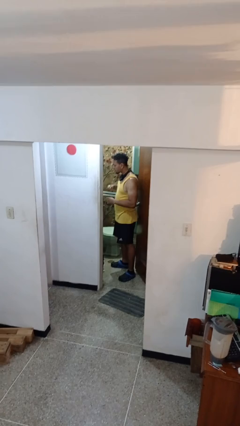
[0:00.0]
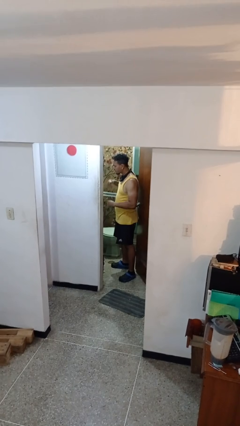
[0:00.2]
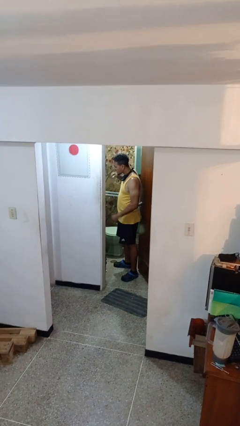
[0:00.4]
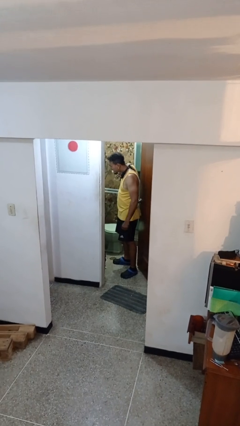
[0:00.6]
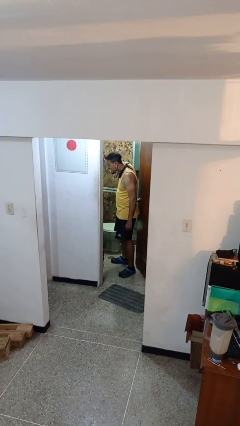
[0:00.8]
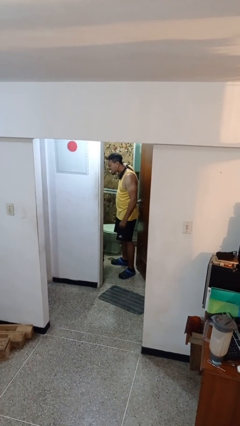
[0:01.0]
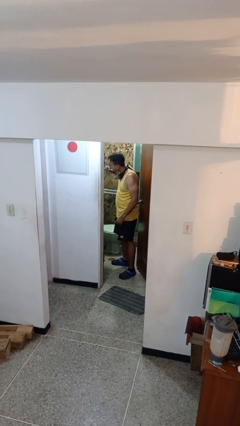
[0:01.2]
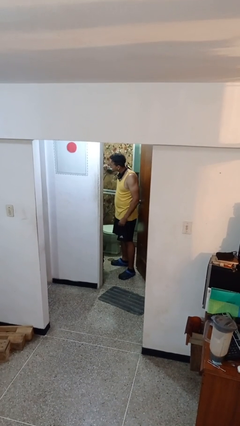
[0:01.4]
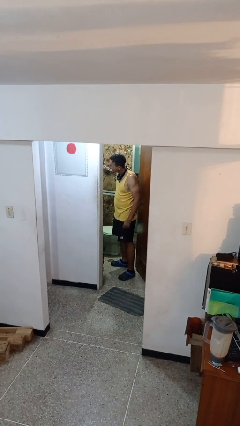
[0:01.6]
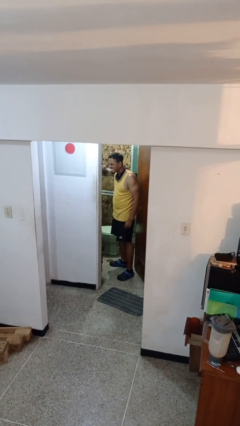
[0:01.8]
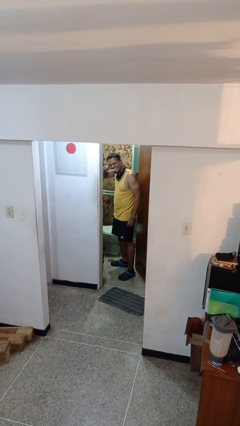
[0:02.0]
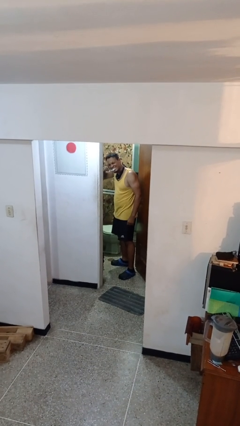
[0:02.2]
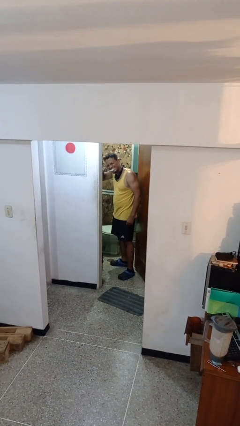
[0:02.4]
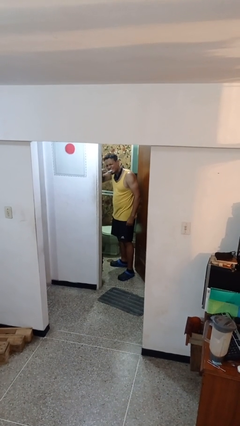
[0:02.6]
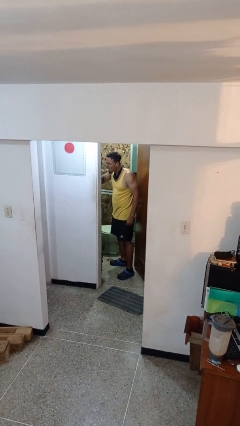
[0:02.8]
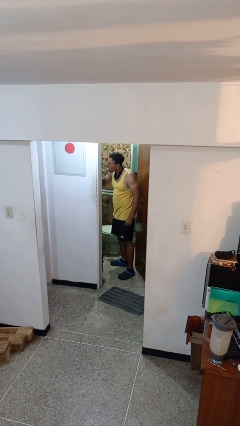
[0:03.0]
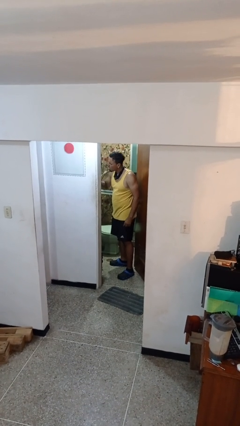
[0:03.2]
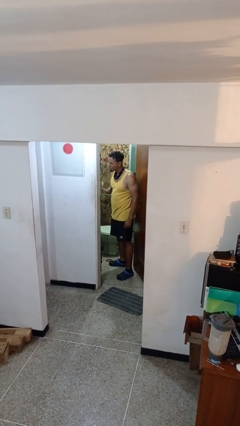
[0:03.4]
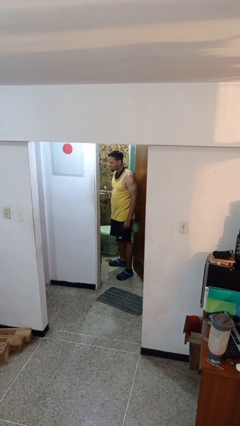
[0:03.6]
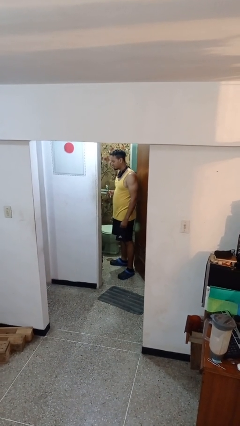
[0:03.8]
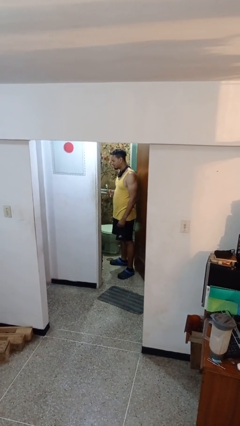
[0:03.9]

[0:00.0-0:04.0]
person brushes teeth

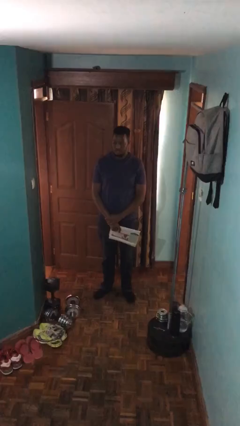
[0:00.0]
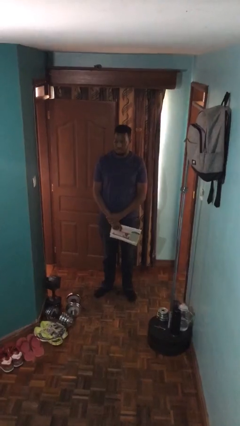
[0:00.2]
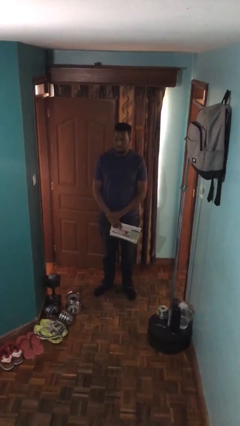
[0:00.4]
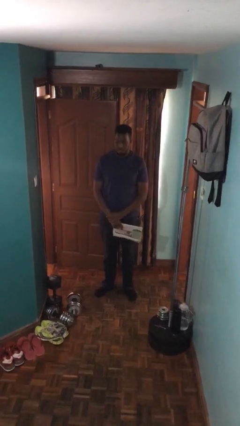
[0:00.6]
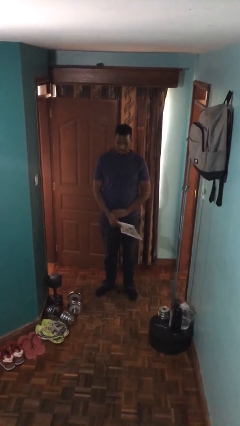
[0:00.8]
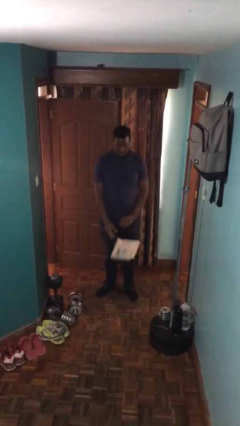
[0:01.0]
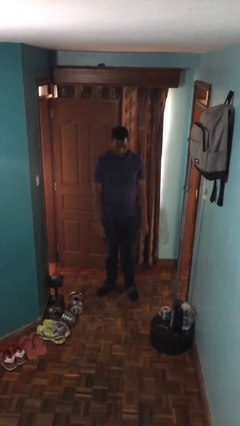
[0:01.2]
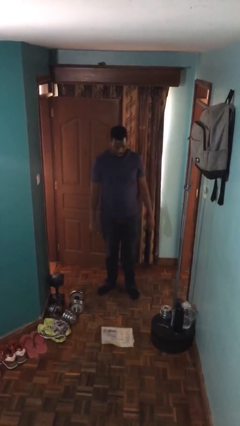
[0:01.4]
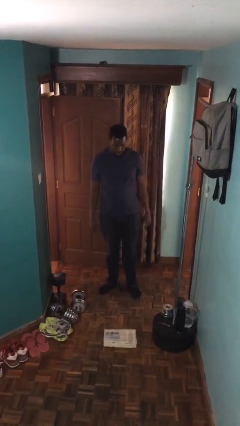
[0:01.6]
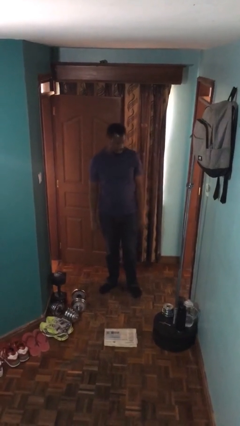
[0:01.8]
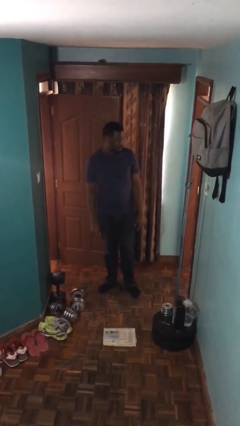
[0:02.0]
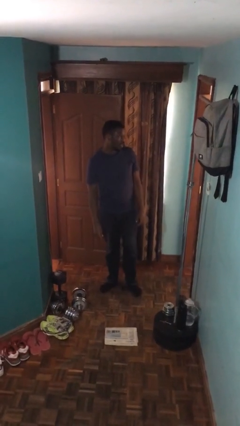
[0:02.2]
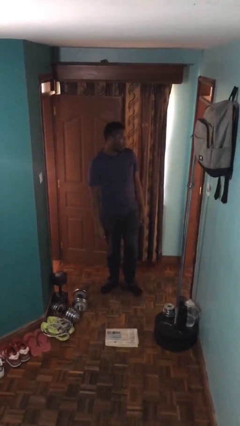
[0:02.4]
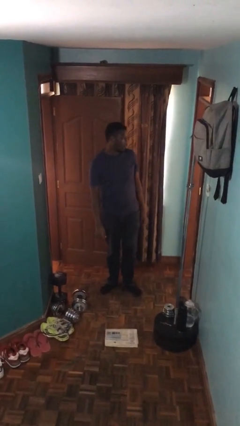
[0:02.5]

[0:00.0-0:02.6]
person drops object

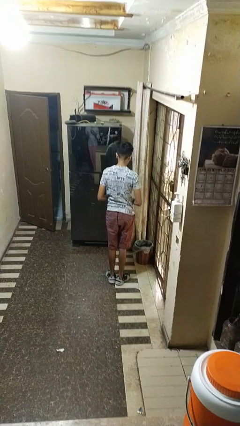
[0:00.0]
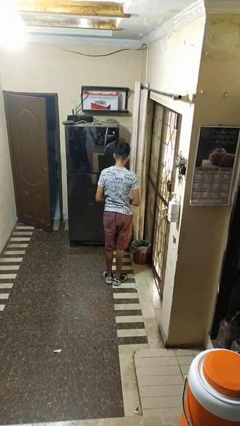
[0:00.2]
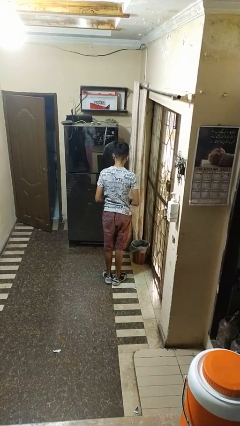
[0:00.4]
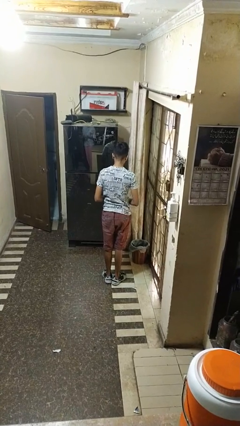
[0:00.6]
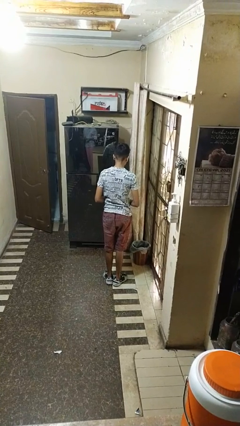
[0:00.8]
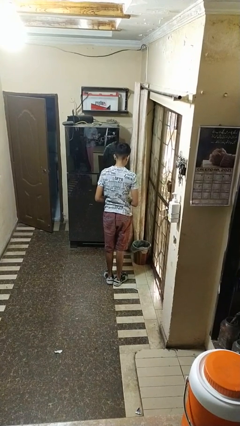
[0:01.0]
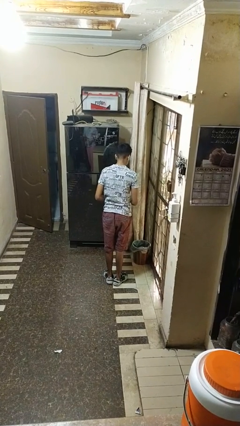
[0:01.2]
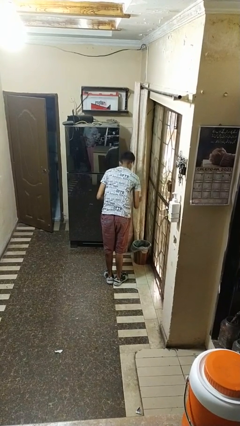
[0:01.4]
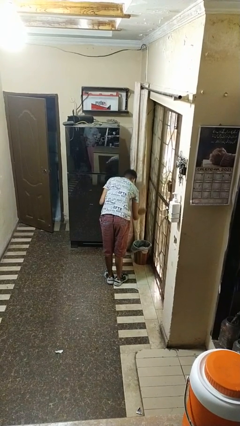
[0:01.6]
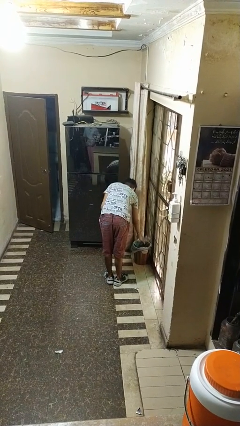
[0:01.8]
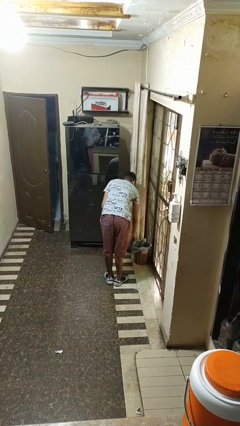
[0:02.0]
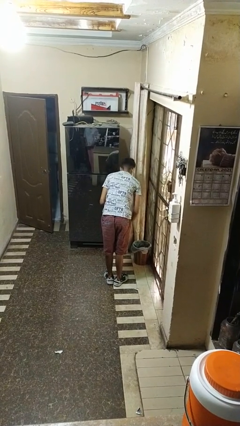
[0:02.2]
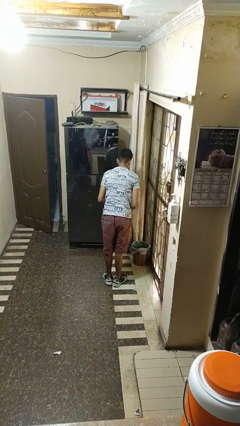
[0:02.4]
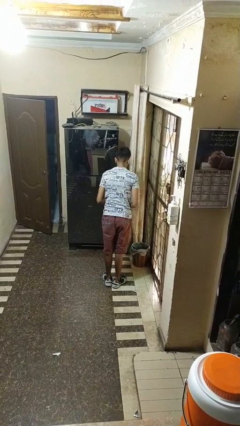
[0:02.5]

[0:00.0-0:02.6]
person discards trash

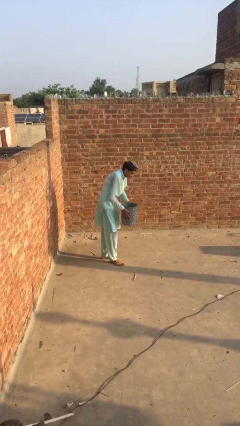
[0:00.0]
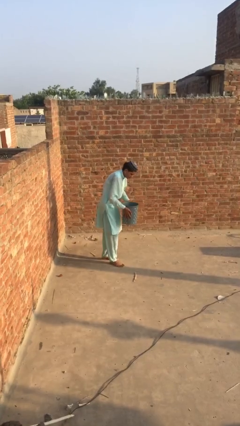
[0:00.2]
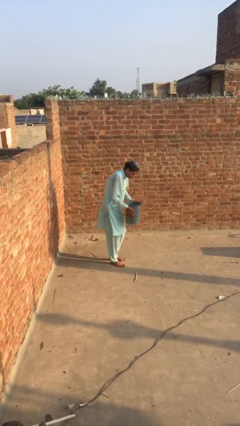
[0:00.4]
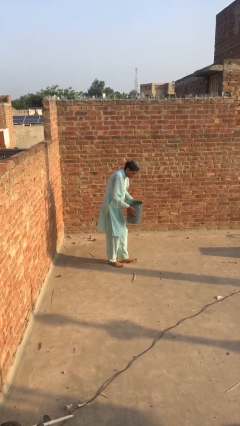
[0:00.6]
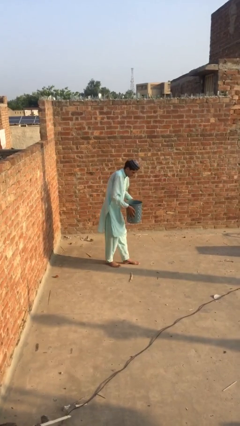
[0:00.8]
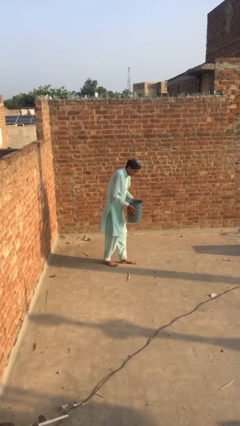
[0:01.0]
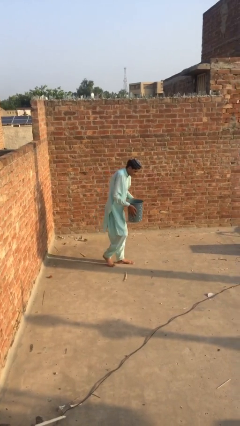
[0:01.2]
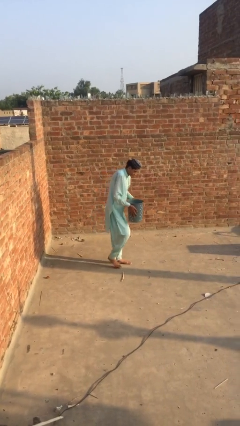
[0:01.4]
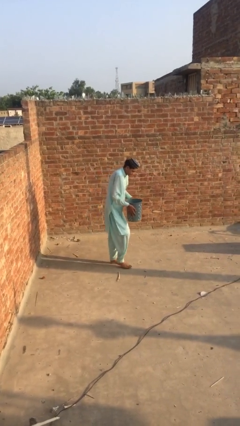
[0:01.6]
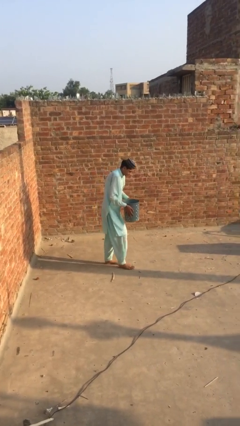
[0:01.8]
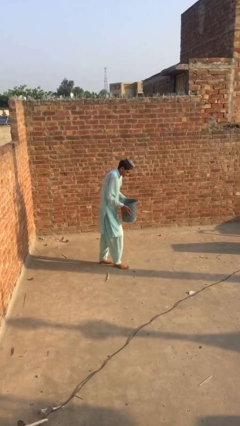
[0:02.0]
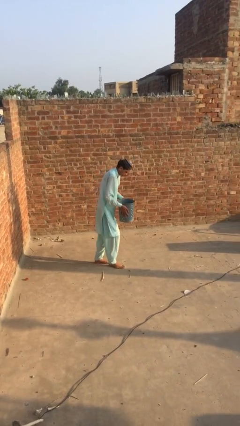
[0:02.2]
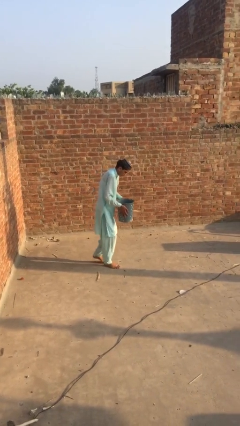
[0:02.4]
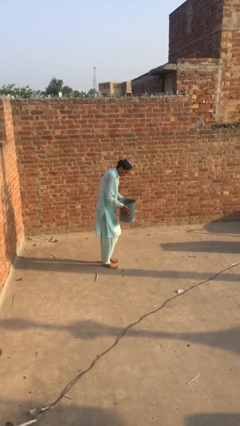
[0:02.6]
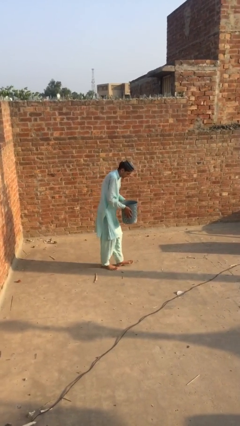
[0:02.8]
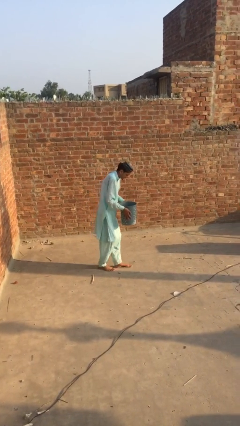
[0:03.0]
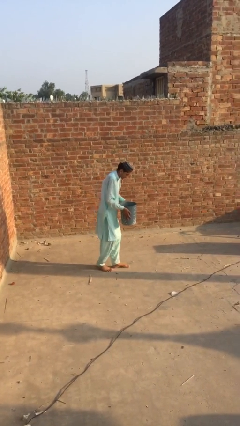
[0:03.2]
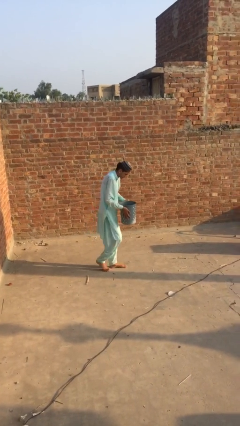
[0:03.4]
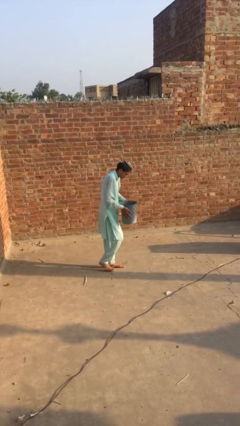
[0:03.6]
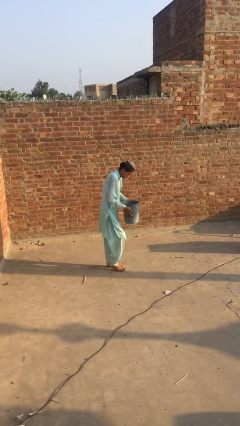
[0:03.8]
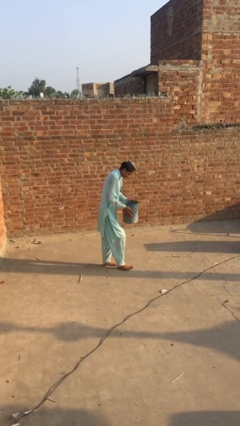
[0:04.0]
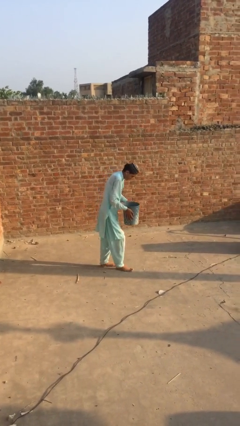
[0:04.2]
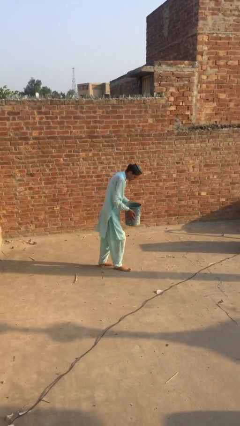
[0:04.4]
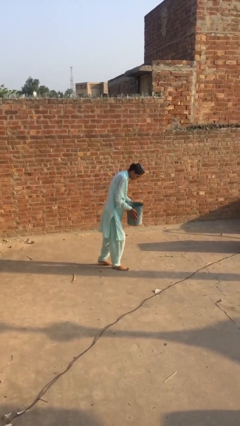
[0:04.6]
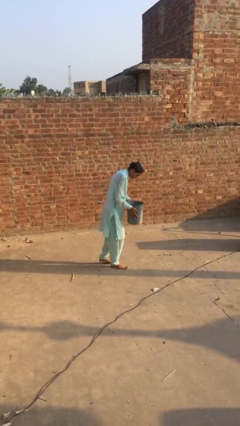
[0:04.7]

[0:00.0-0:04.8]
person carries heavy object

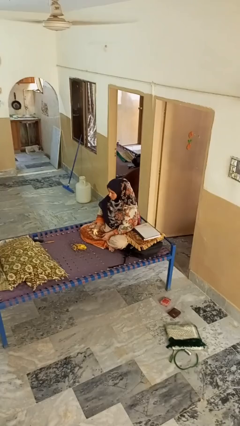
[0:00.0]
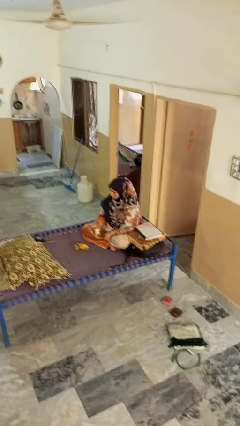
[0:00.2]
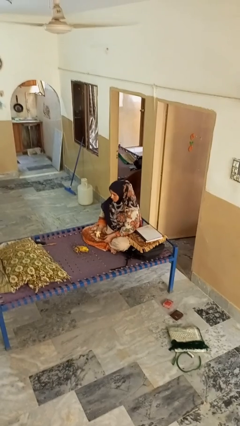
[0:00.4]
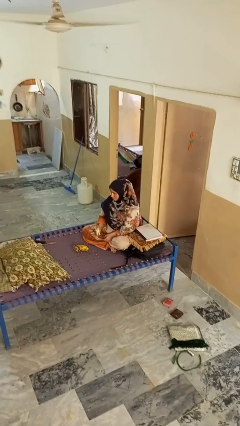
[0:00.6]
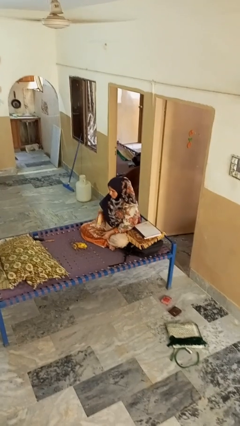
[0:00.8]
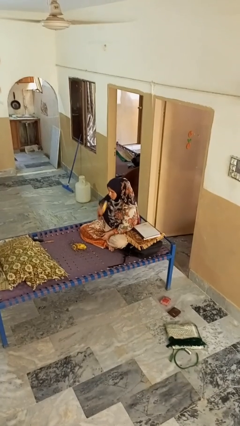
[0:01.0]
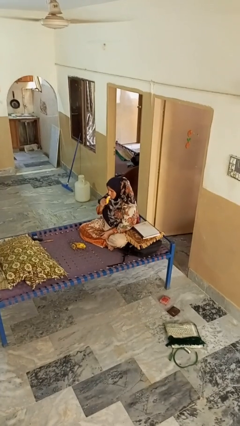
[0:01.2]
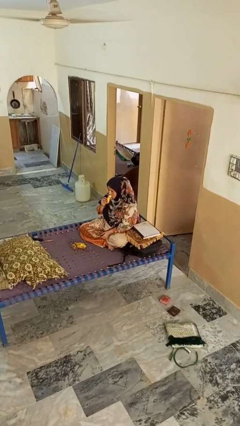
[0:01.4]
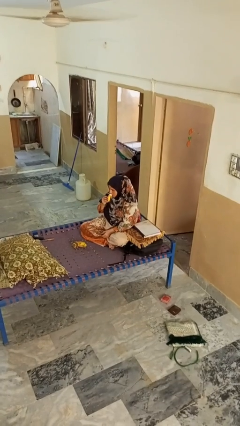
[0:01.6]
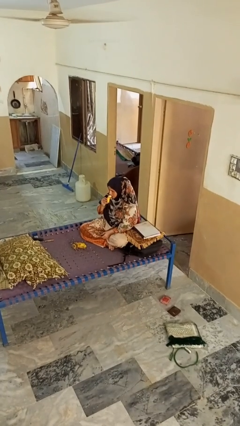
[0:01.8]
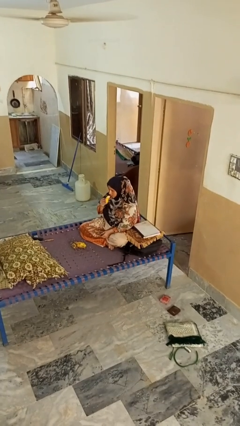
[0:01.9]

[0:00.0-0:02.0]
person eats banana

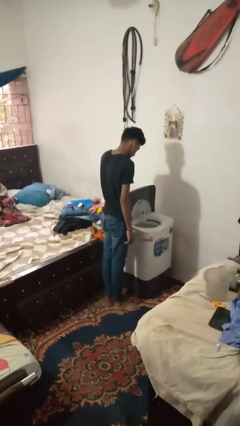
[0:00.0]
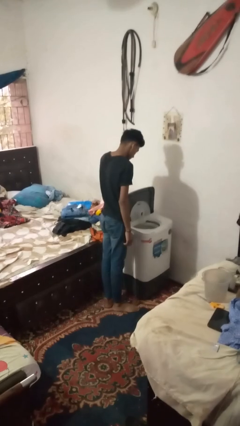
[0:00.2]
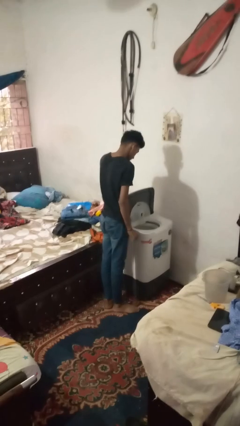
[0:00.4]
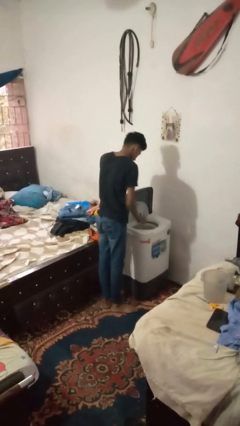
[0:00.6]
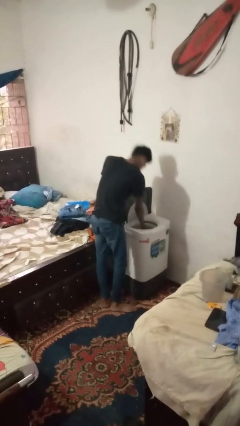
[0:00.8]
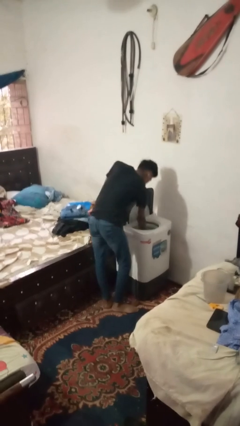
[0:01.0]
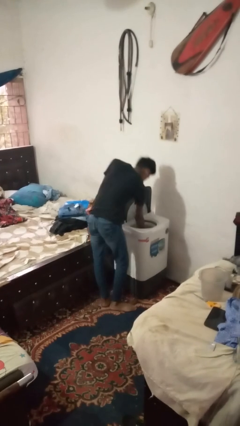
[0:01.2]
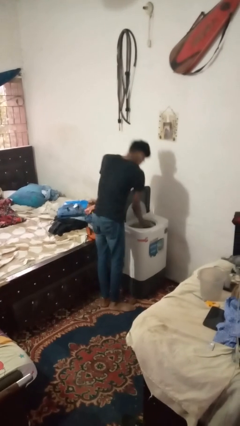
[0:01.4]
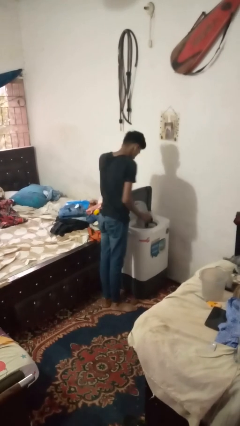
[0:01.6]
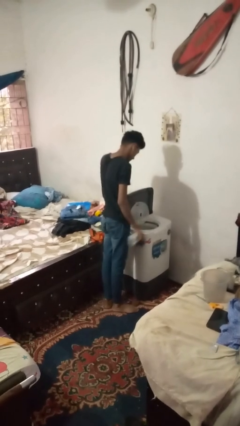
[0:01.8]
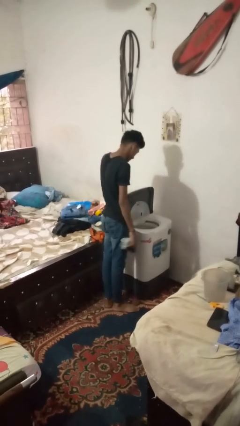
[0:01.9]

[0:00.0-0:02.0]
person unloads dryer
